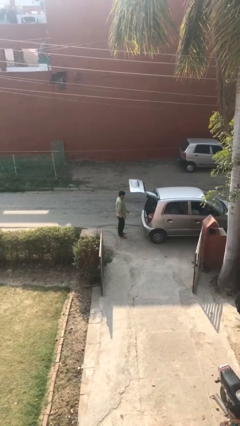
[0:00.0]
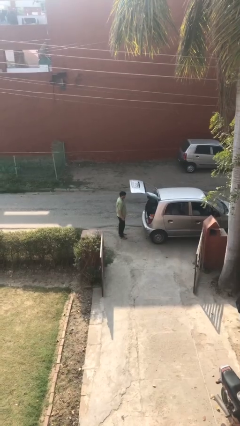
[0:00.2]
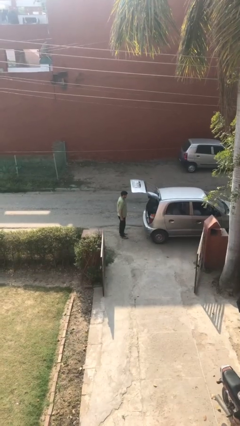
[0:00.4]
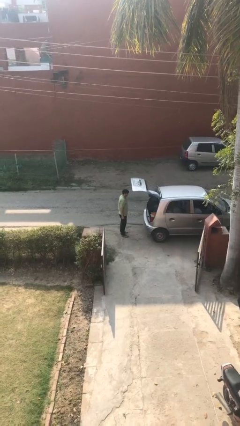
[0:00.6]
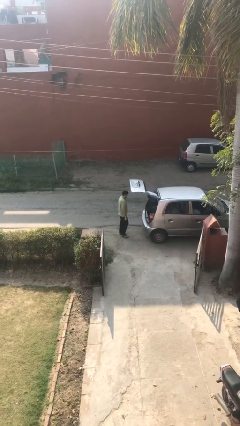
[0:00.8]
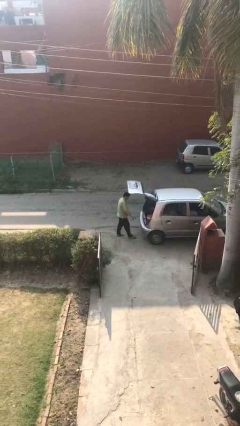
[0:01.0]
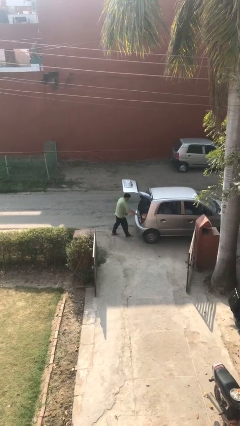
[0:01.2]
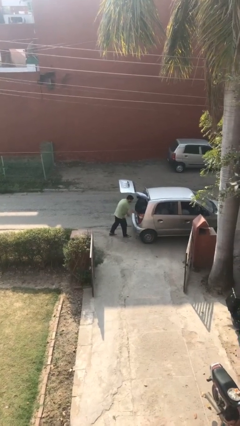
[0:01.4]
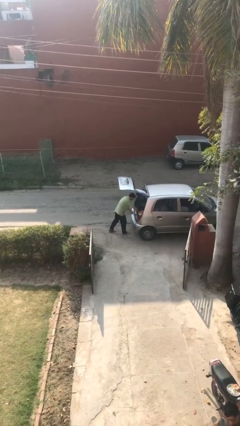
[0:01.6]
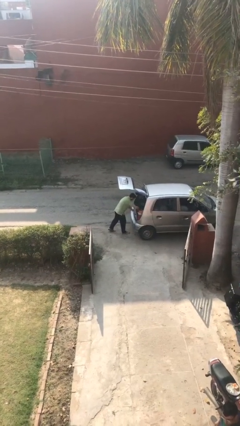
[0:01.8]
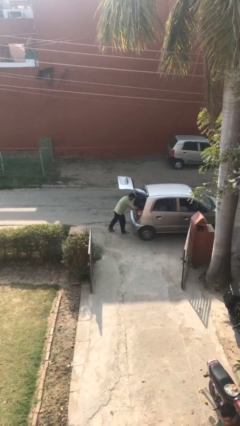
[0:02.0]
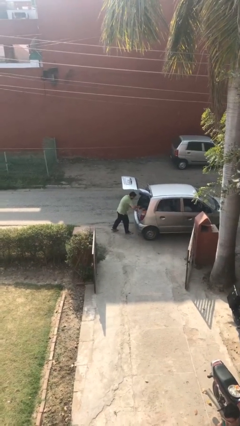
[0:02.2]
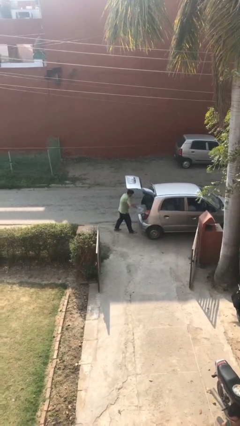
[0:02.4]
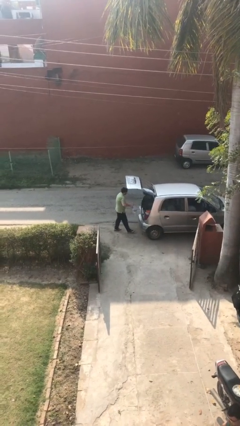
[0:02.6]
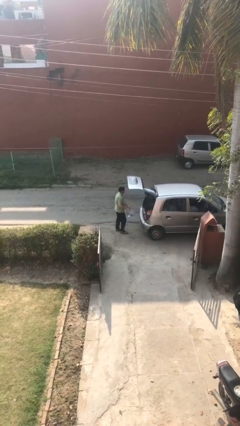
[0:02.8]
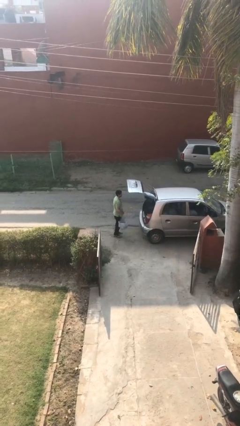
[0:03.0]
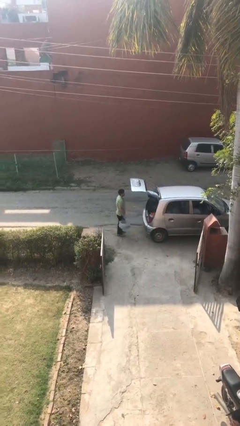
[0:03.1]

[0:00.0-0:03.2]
person unloads car

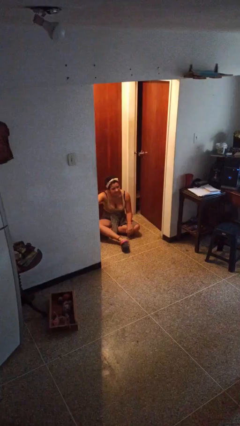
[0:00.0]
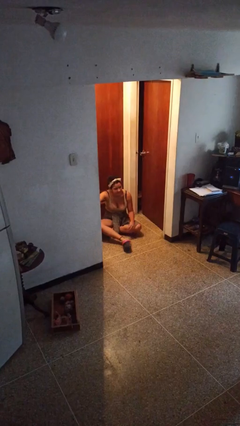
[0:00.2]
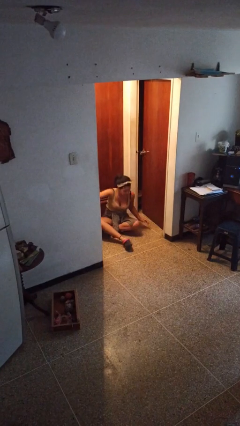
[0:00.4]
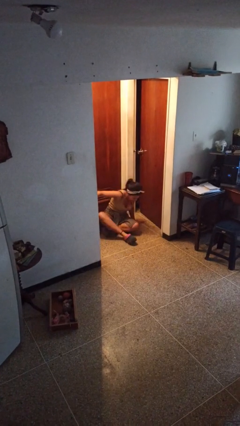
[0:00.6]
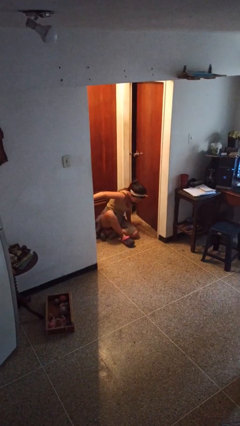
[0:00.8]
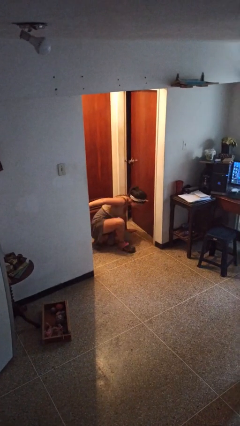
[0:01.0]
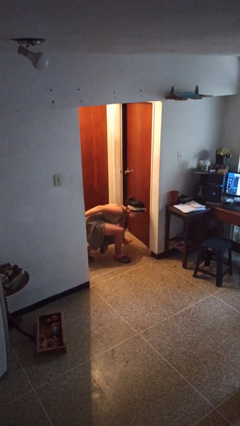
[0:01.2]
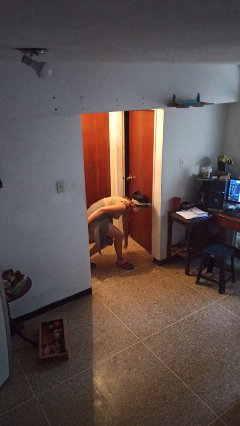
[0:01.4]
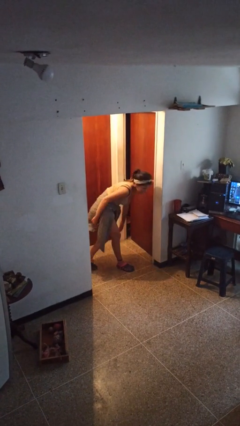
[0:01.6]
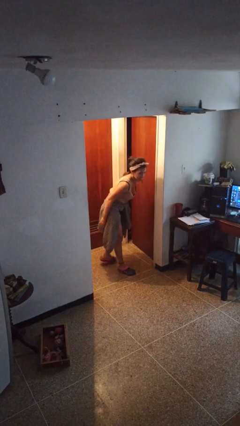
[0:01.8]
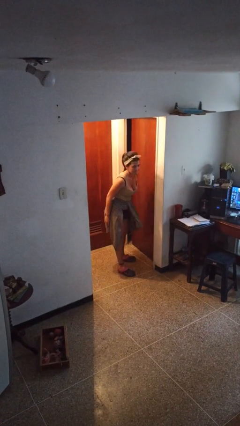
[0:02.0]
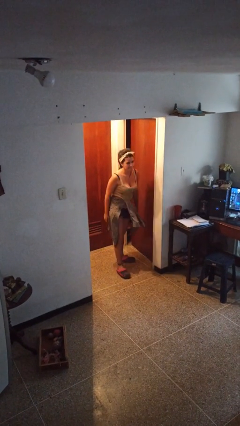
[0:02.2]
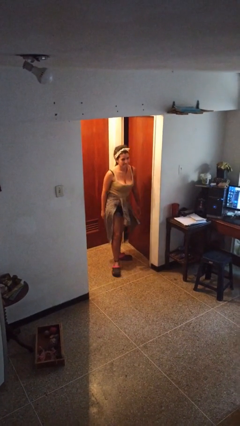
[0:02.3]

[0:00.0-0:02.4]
person stands up

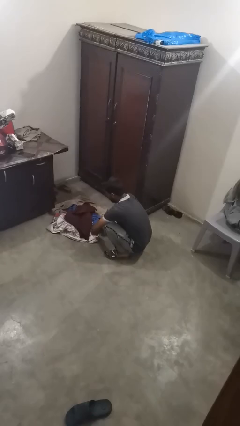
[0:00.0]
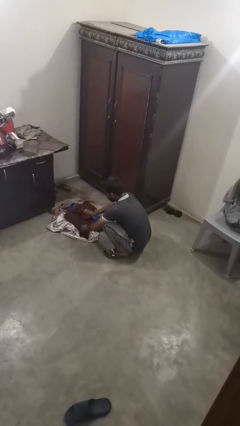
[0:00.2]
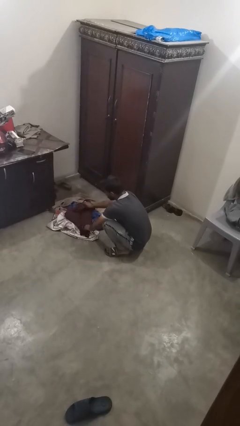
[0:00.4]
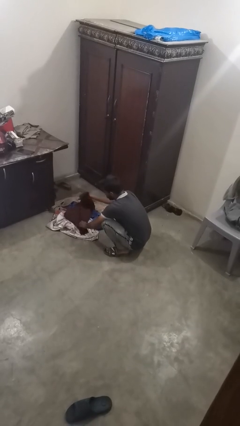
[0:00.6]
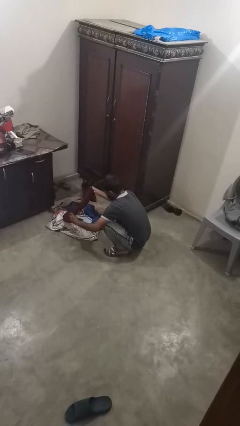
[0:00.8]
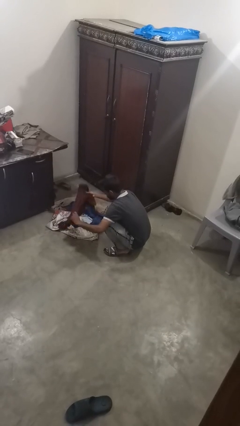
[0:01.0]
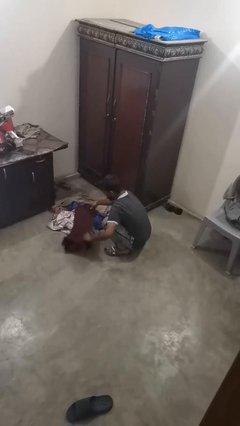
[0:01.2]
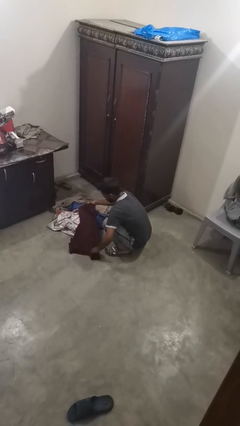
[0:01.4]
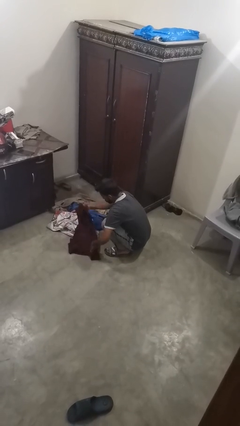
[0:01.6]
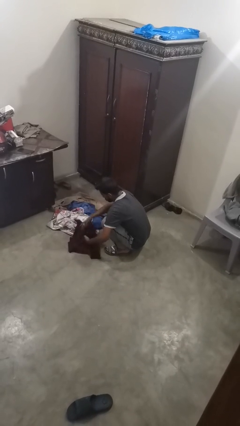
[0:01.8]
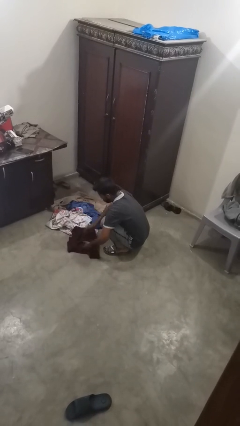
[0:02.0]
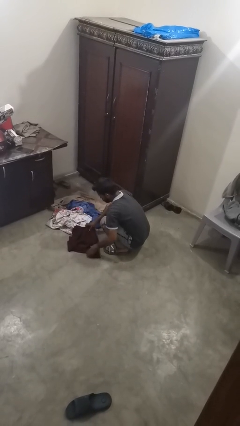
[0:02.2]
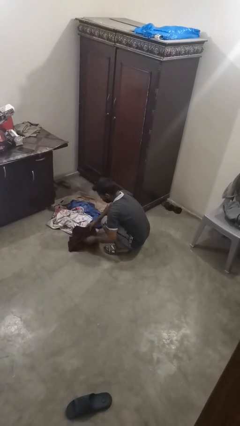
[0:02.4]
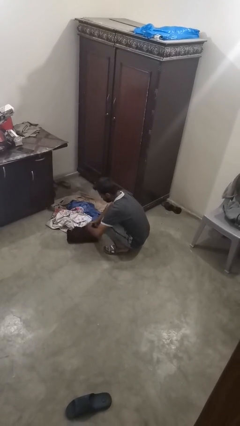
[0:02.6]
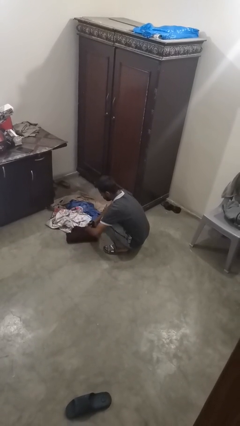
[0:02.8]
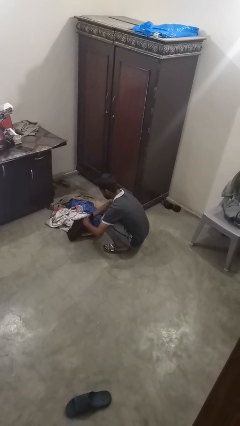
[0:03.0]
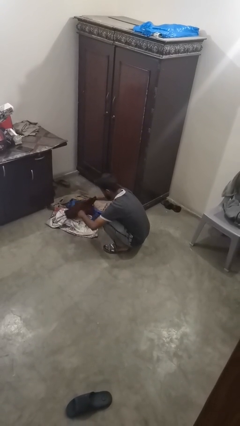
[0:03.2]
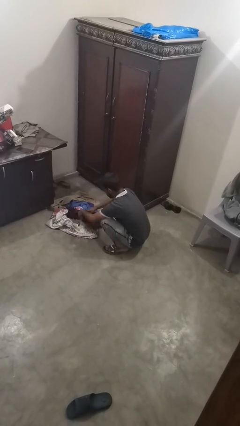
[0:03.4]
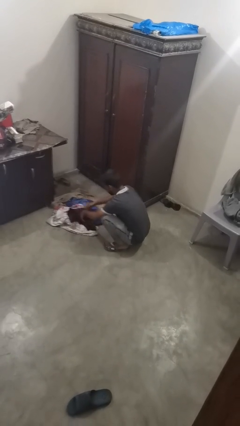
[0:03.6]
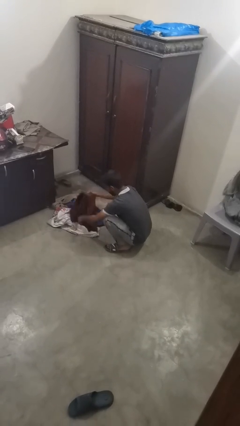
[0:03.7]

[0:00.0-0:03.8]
person folds shirt

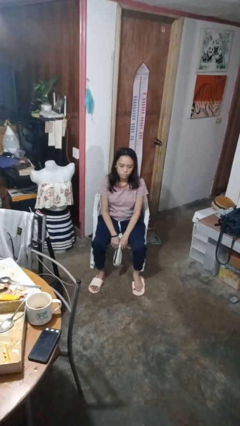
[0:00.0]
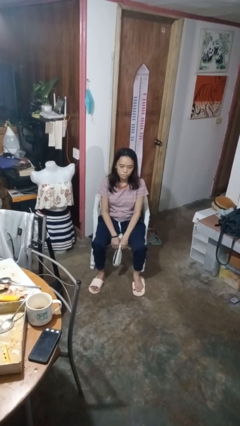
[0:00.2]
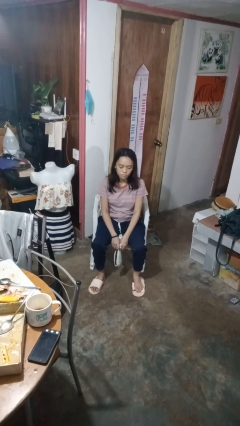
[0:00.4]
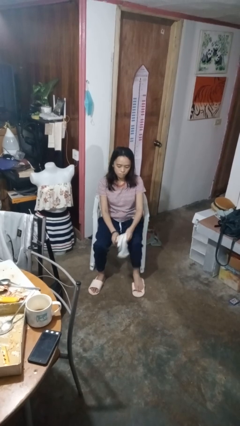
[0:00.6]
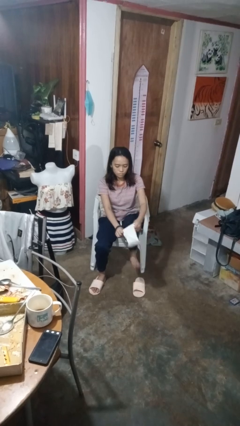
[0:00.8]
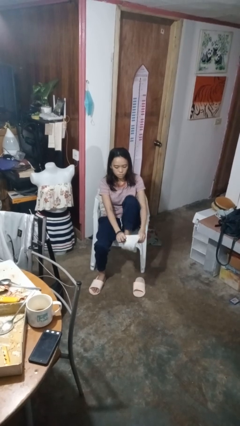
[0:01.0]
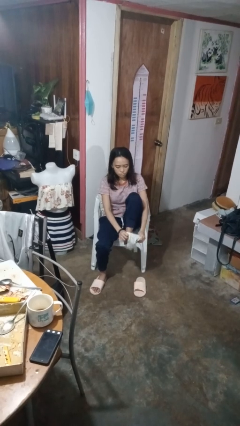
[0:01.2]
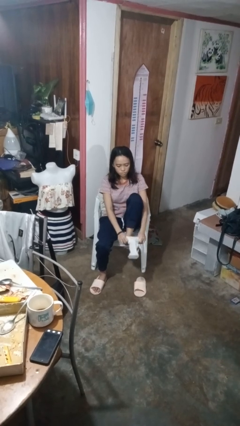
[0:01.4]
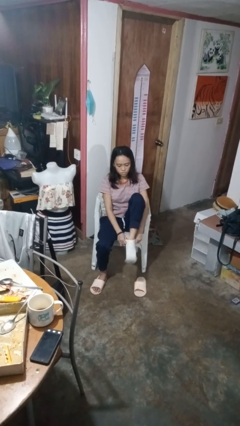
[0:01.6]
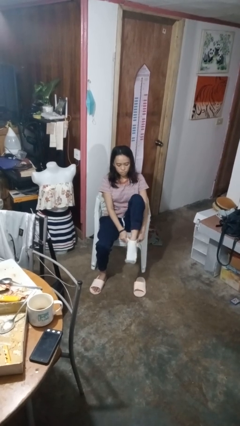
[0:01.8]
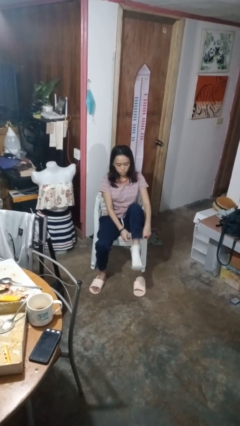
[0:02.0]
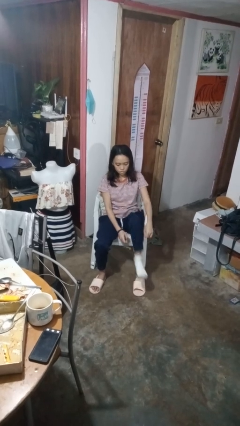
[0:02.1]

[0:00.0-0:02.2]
person puts on socks

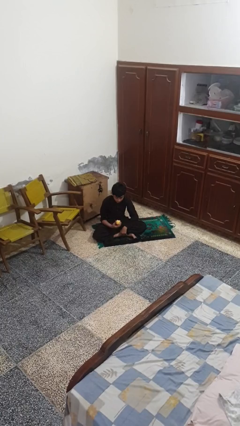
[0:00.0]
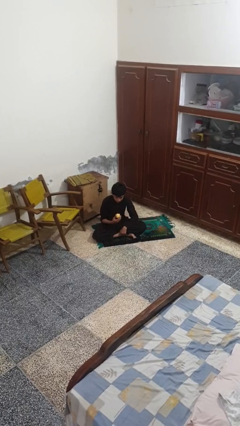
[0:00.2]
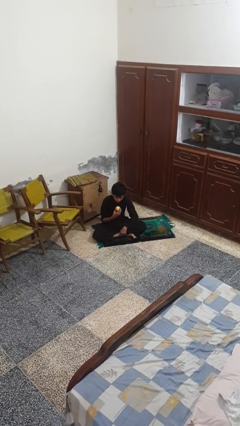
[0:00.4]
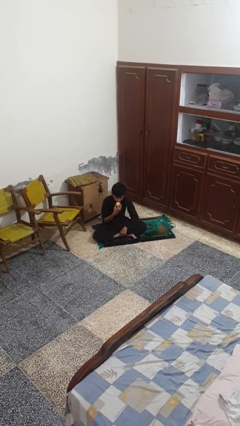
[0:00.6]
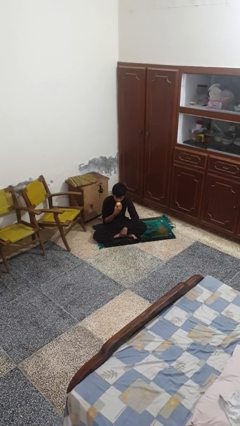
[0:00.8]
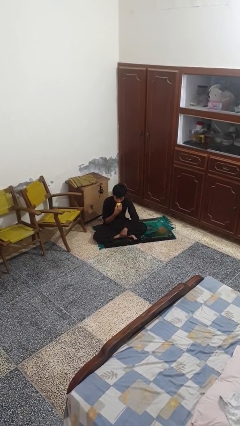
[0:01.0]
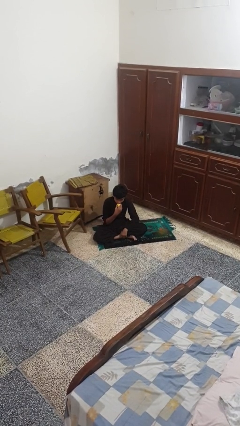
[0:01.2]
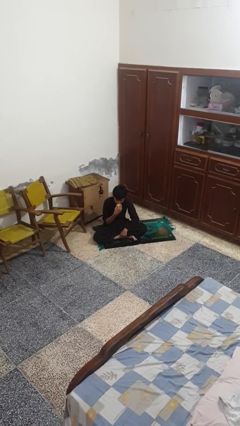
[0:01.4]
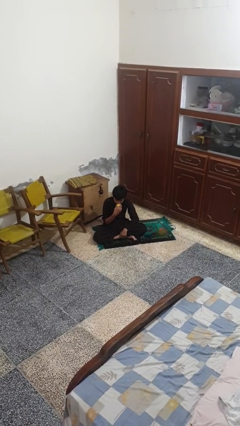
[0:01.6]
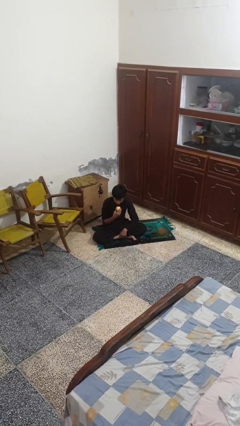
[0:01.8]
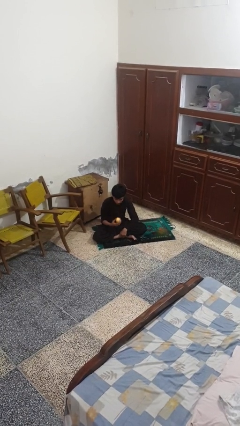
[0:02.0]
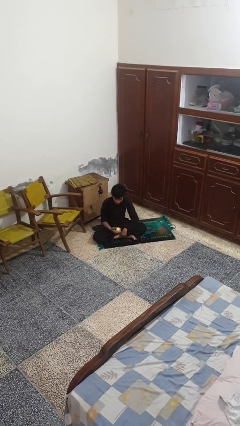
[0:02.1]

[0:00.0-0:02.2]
person eats apple

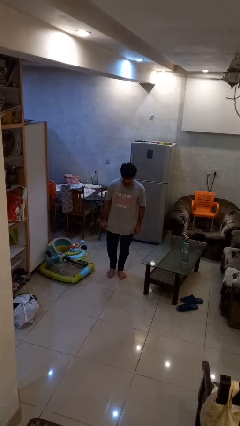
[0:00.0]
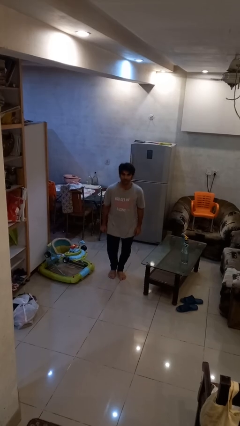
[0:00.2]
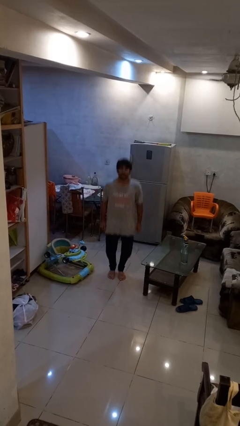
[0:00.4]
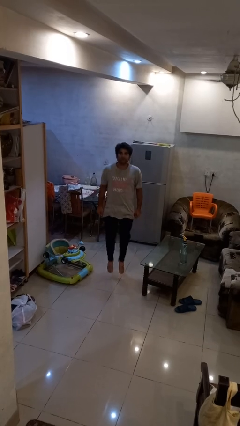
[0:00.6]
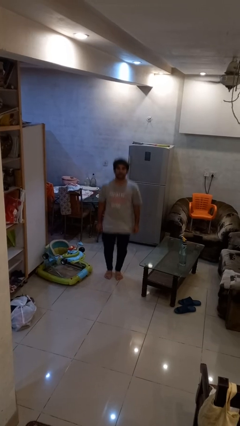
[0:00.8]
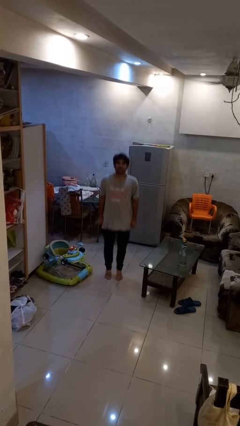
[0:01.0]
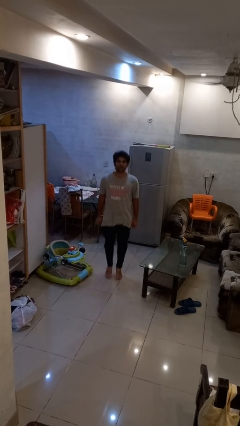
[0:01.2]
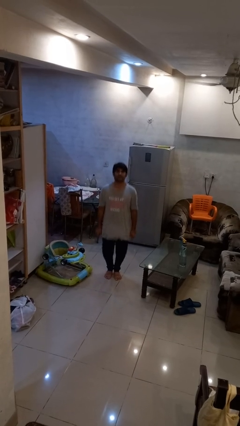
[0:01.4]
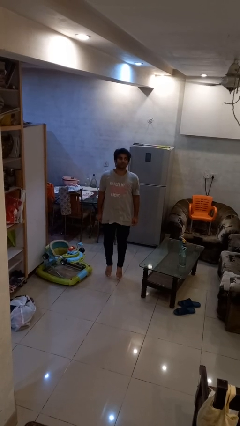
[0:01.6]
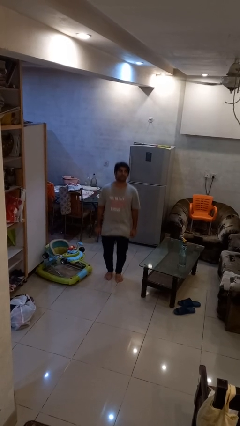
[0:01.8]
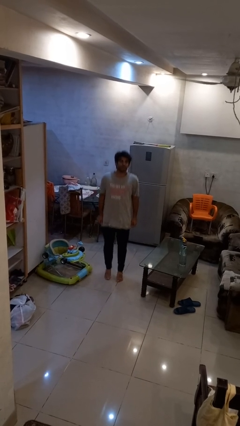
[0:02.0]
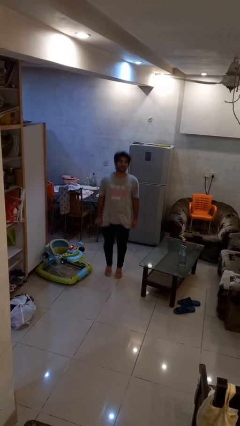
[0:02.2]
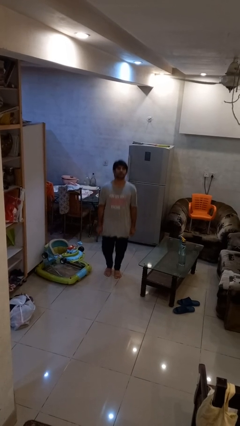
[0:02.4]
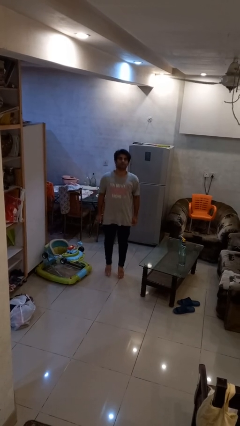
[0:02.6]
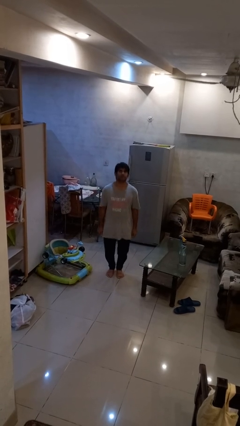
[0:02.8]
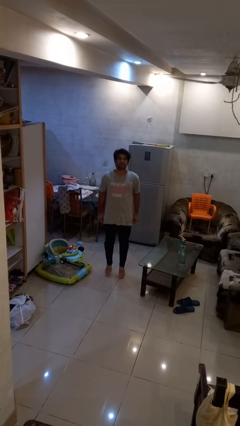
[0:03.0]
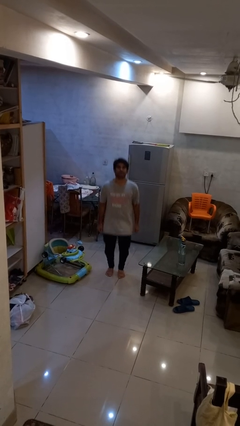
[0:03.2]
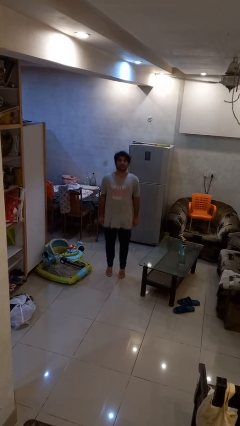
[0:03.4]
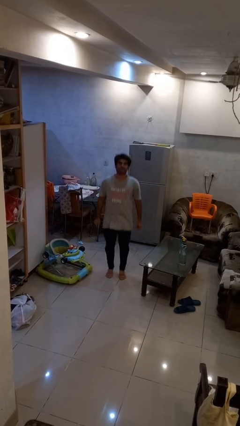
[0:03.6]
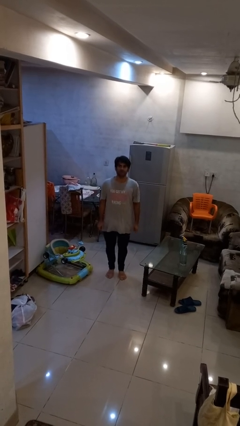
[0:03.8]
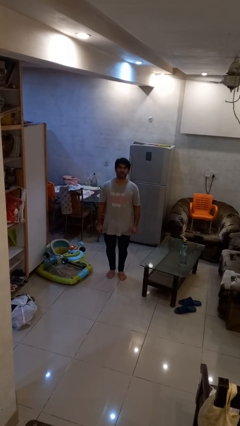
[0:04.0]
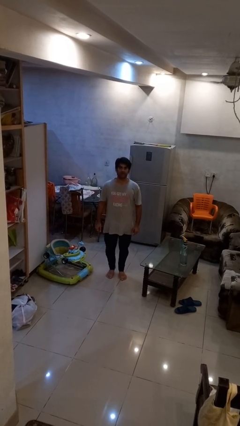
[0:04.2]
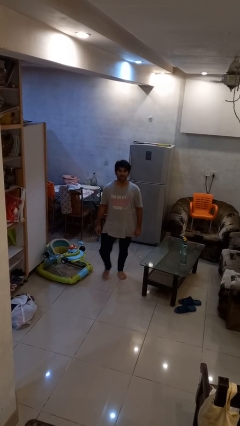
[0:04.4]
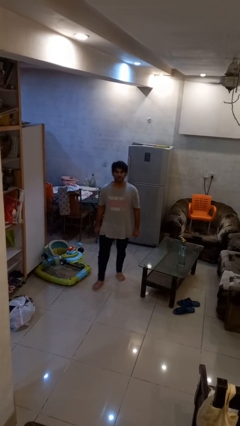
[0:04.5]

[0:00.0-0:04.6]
person jumps
